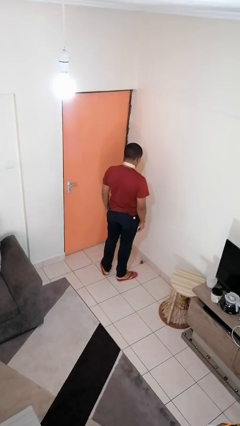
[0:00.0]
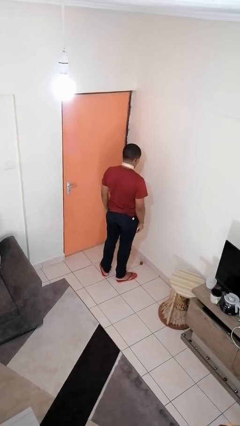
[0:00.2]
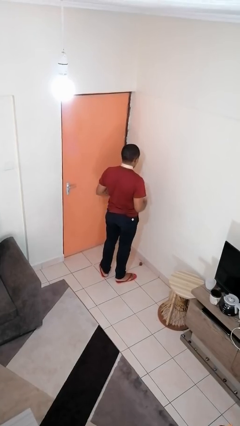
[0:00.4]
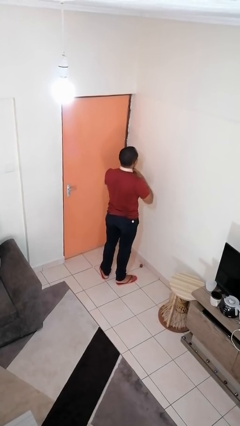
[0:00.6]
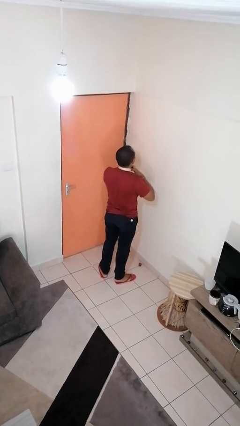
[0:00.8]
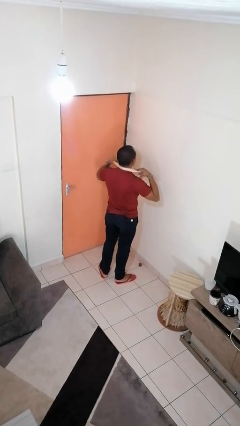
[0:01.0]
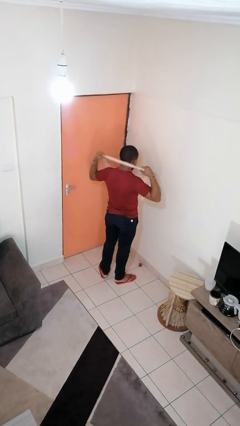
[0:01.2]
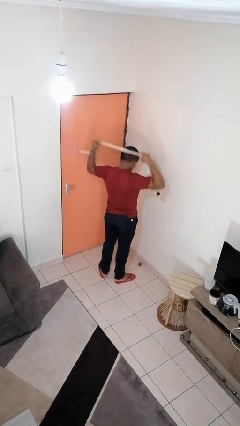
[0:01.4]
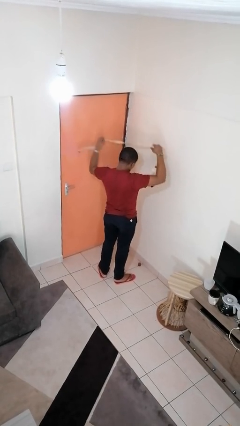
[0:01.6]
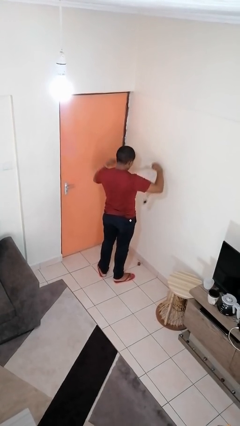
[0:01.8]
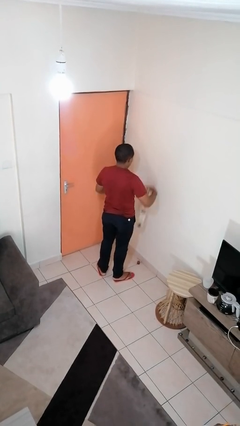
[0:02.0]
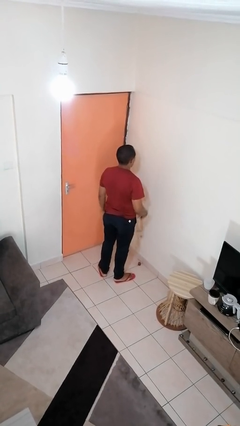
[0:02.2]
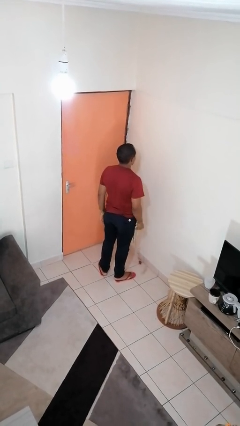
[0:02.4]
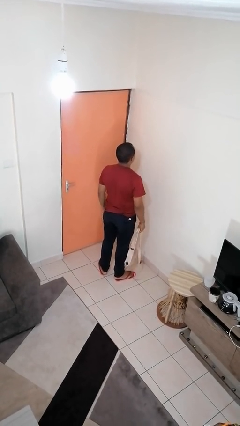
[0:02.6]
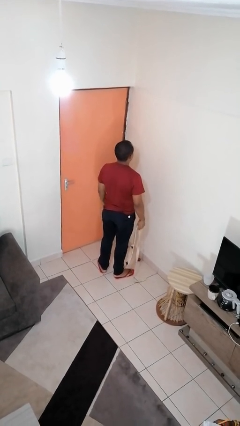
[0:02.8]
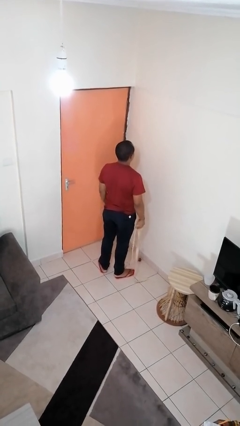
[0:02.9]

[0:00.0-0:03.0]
person takes off necktie

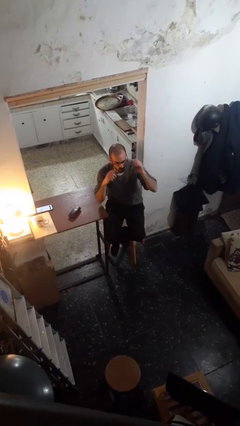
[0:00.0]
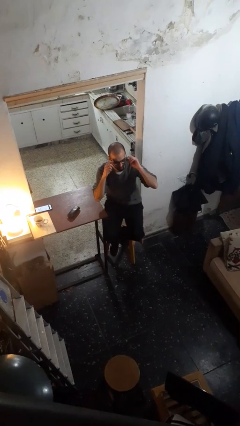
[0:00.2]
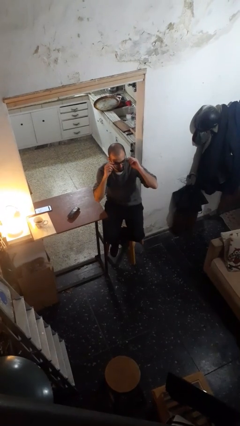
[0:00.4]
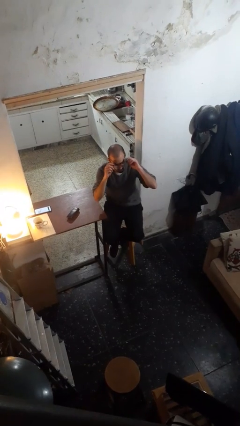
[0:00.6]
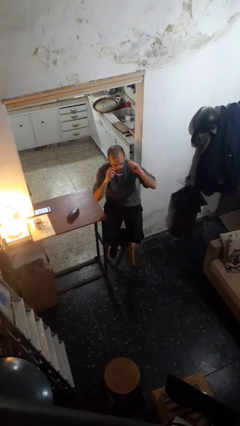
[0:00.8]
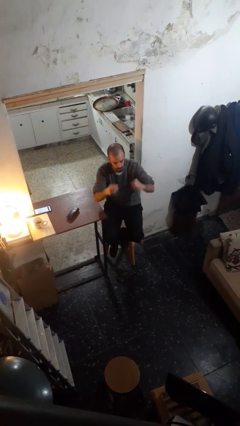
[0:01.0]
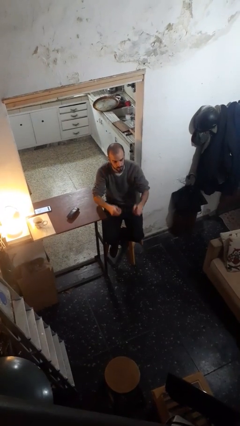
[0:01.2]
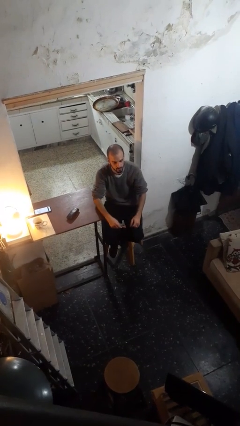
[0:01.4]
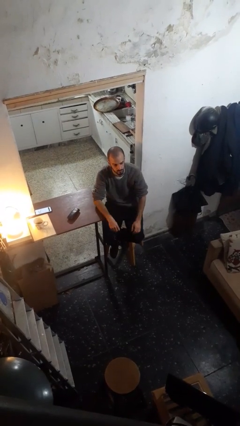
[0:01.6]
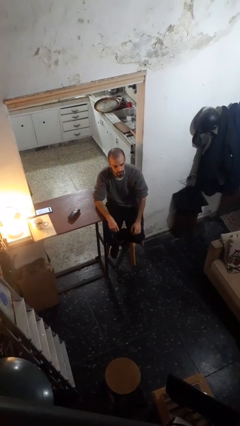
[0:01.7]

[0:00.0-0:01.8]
person takes off glasses

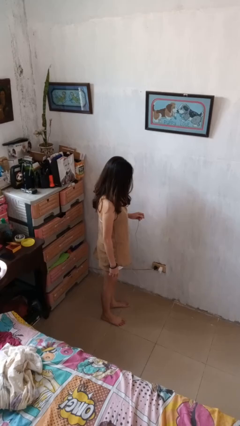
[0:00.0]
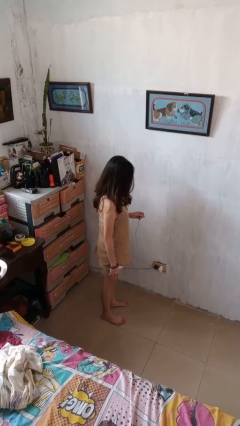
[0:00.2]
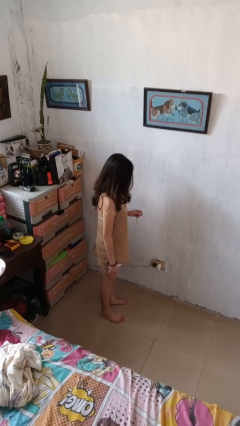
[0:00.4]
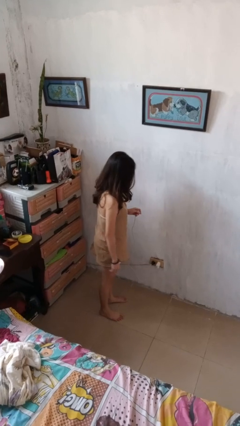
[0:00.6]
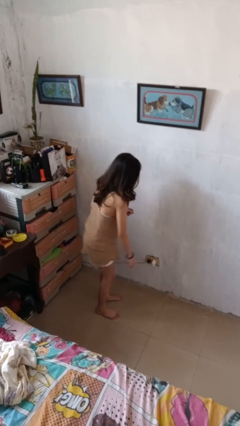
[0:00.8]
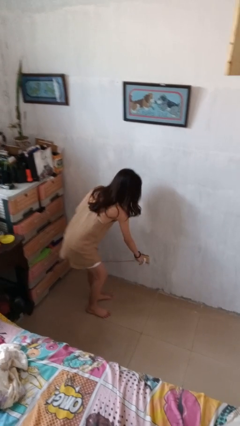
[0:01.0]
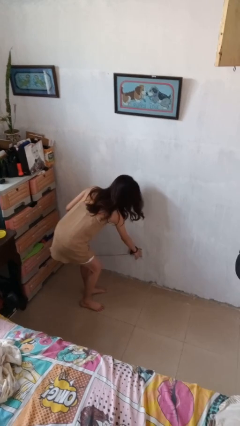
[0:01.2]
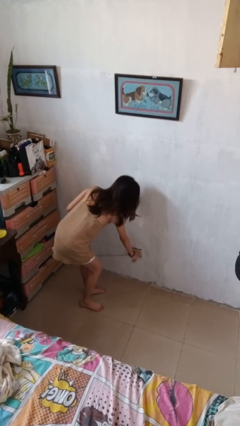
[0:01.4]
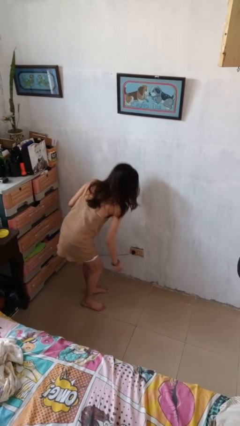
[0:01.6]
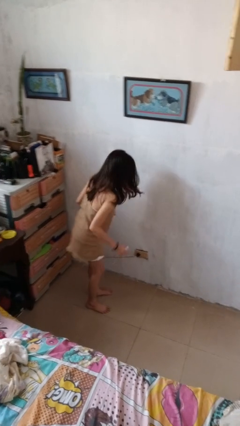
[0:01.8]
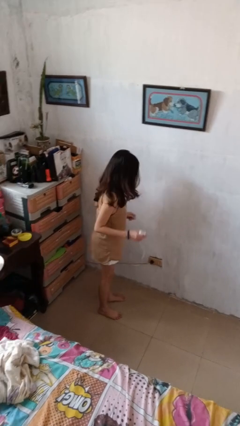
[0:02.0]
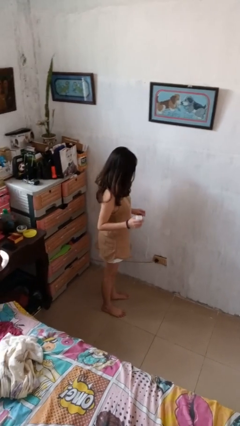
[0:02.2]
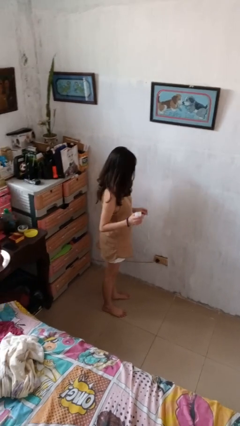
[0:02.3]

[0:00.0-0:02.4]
person unplugs from electrical socket

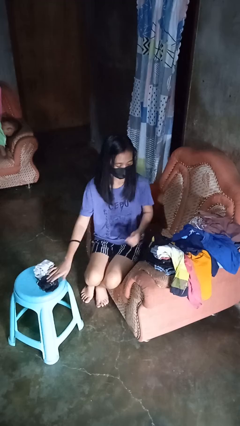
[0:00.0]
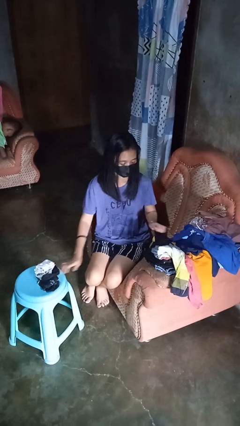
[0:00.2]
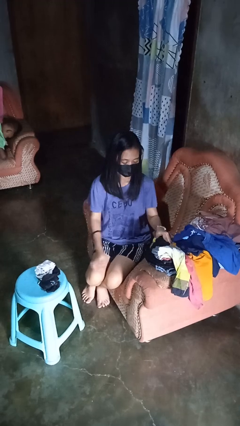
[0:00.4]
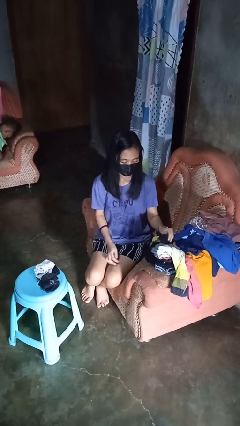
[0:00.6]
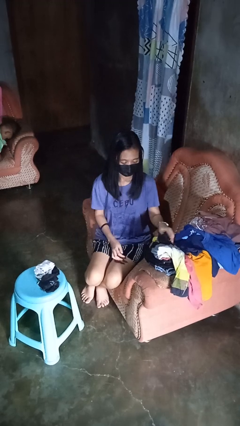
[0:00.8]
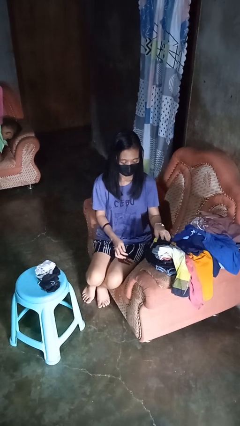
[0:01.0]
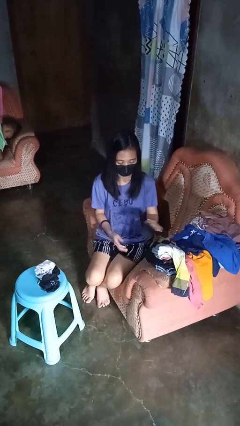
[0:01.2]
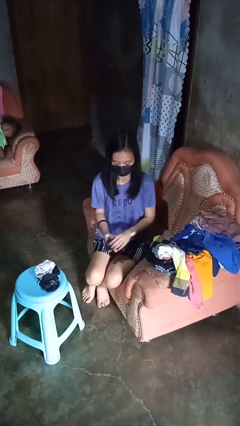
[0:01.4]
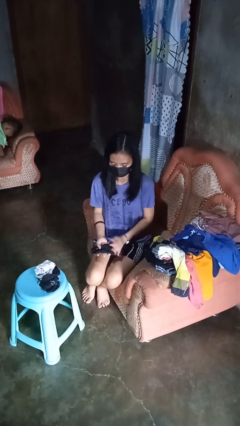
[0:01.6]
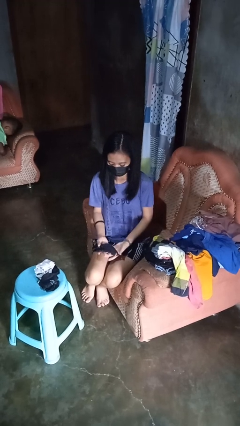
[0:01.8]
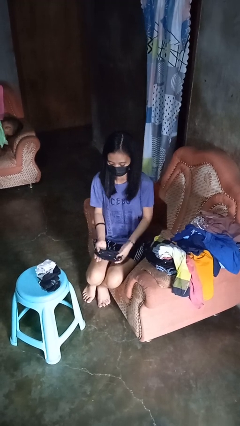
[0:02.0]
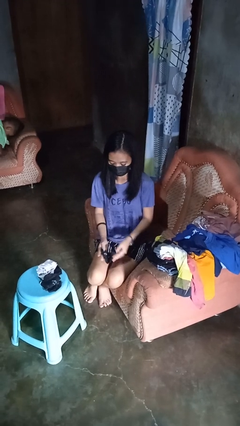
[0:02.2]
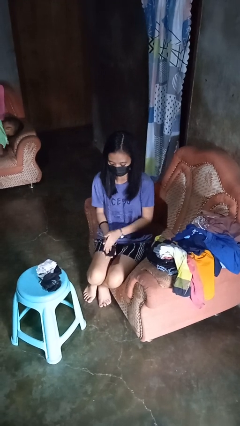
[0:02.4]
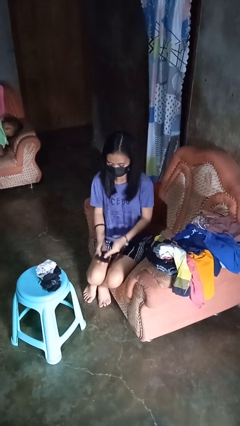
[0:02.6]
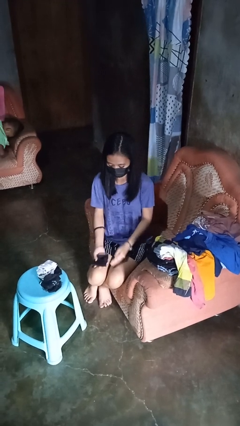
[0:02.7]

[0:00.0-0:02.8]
person folds socks

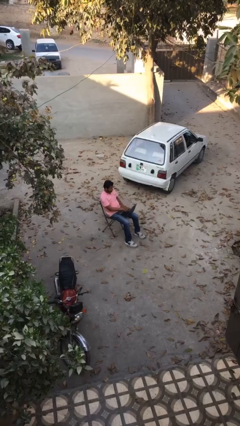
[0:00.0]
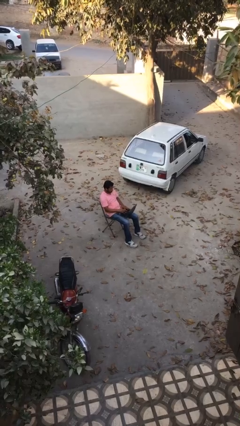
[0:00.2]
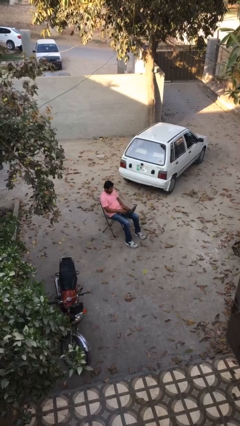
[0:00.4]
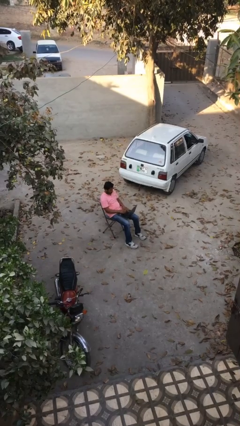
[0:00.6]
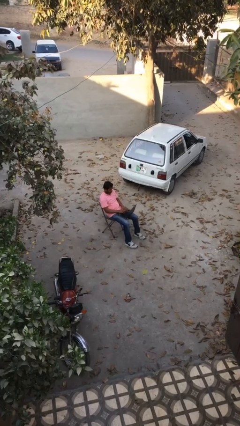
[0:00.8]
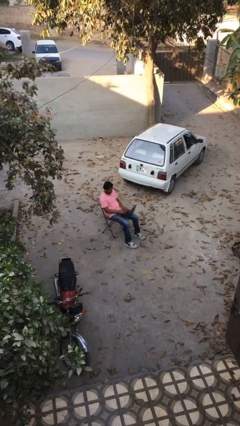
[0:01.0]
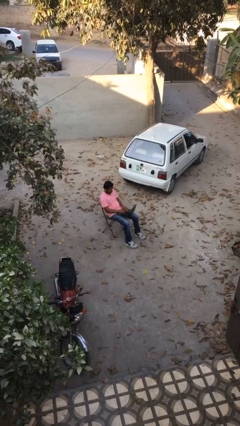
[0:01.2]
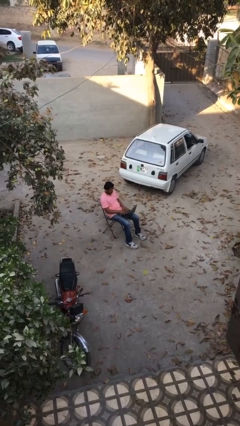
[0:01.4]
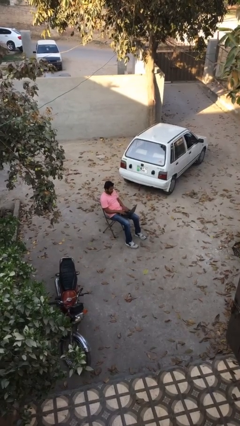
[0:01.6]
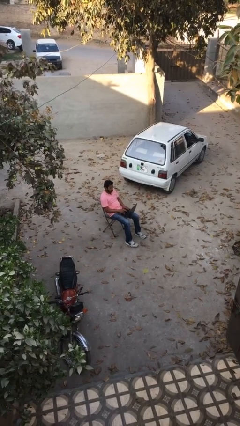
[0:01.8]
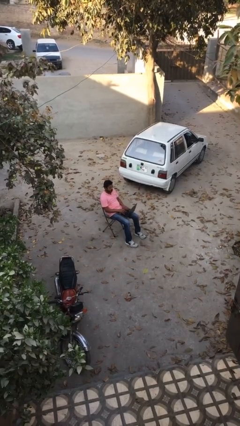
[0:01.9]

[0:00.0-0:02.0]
person interacts with laptop

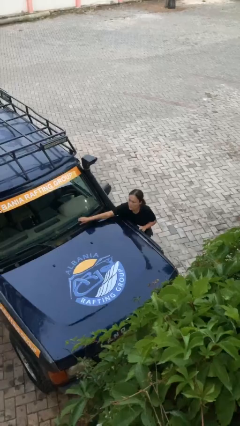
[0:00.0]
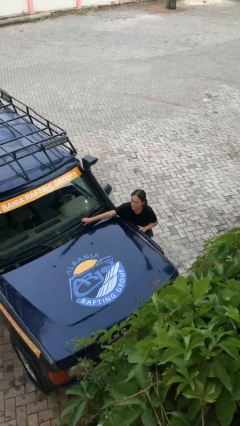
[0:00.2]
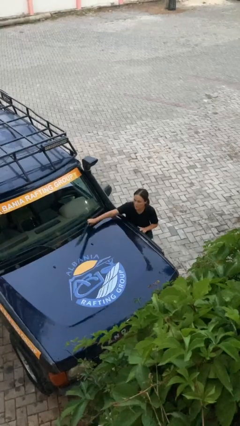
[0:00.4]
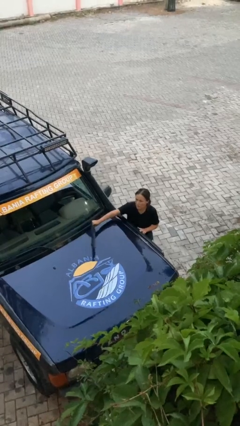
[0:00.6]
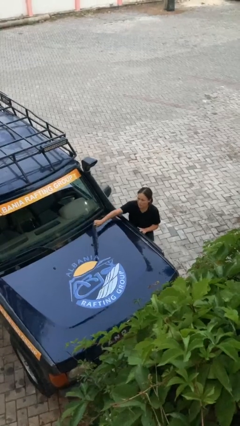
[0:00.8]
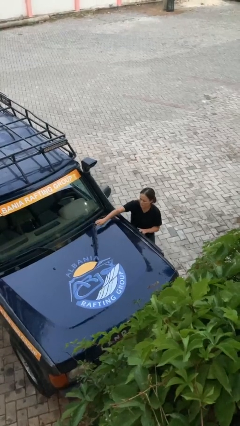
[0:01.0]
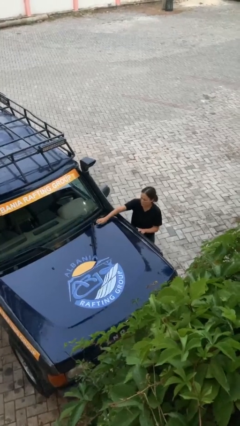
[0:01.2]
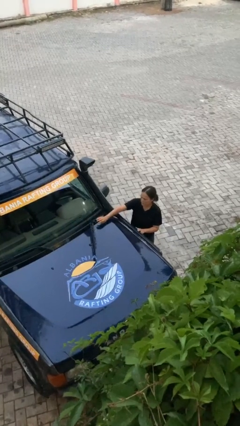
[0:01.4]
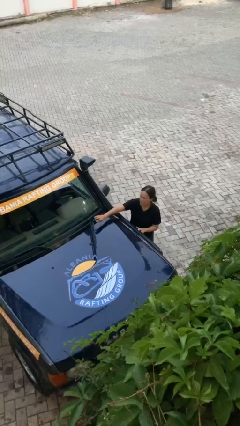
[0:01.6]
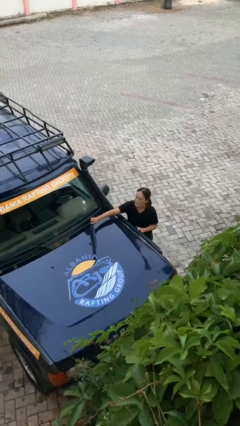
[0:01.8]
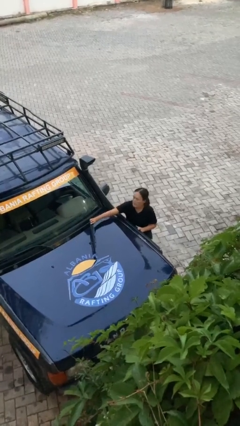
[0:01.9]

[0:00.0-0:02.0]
person flips up car wipers

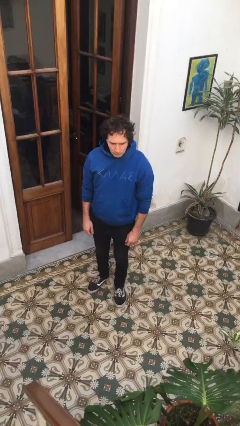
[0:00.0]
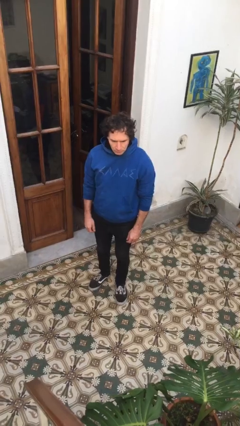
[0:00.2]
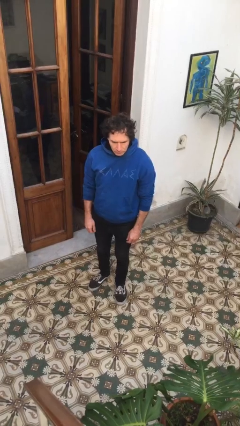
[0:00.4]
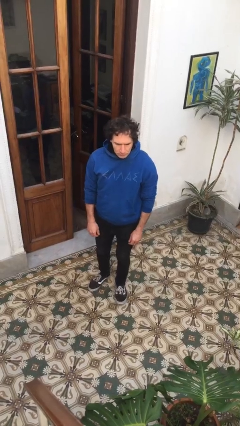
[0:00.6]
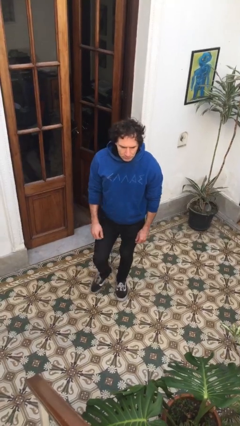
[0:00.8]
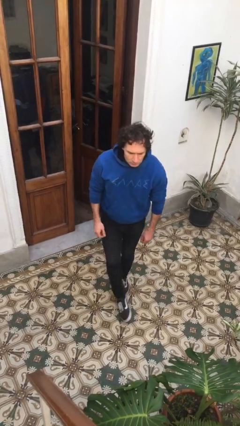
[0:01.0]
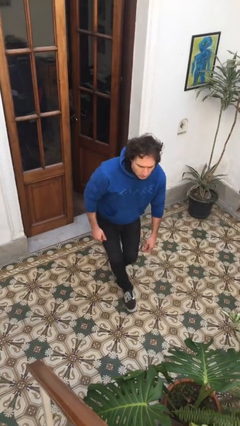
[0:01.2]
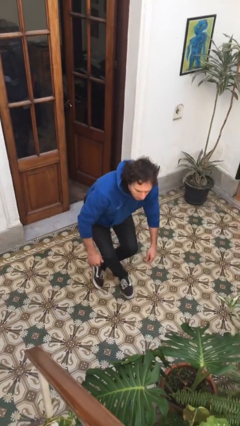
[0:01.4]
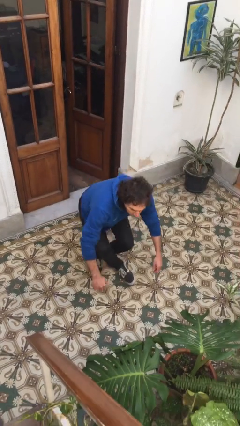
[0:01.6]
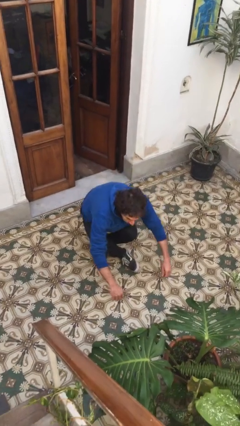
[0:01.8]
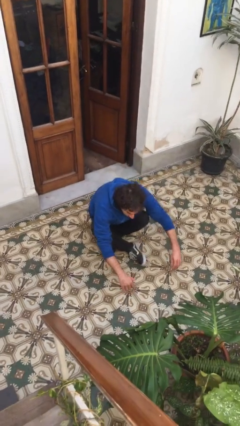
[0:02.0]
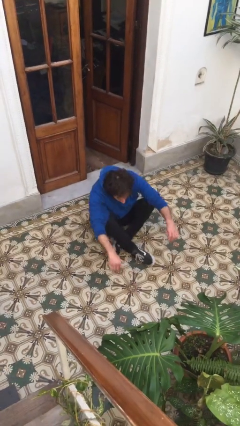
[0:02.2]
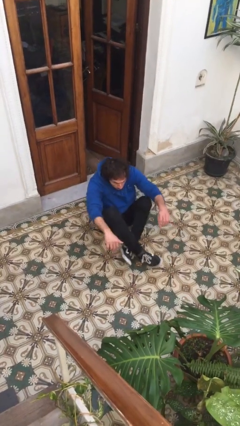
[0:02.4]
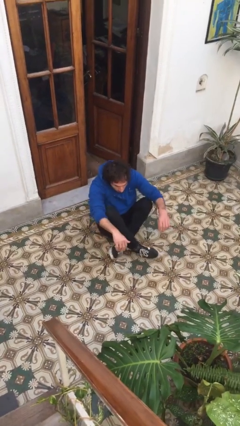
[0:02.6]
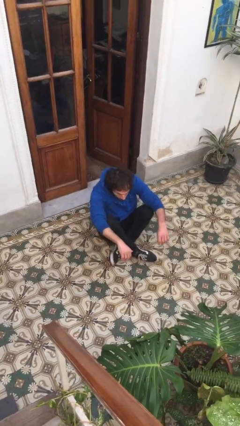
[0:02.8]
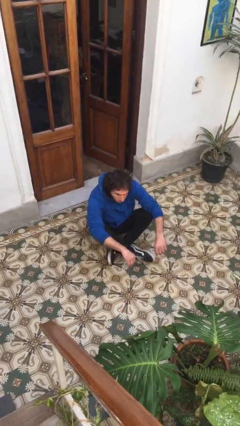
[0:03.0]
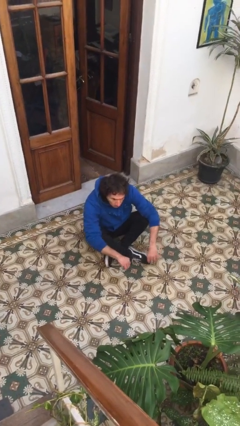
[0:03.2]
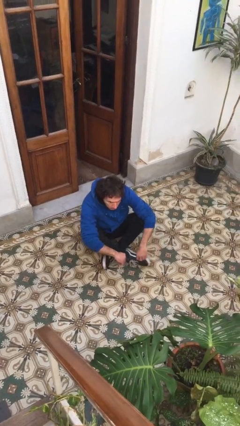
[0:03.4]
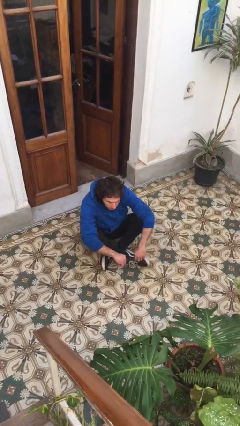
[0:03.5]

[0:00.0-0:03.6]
person sits crisscross
